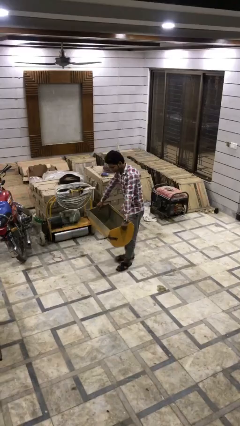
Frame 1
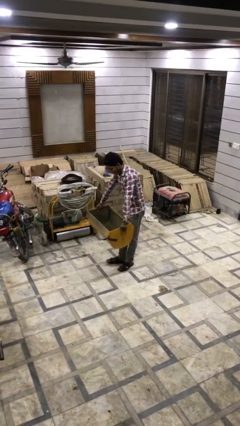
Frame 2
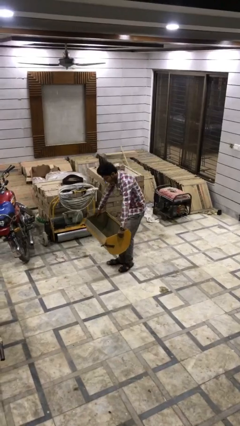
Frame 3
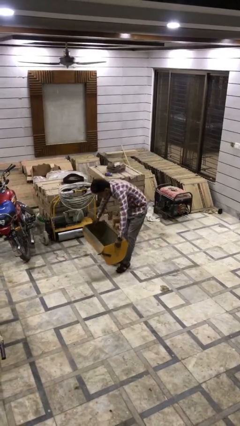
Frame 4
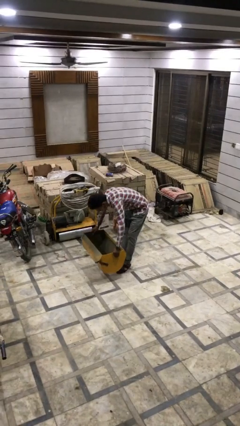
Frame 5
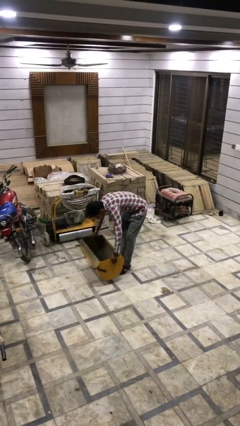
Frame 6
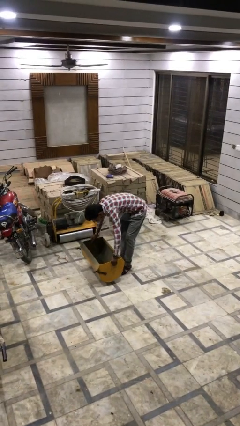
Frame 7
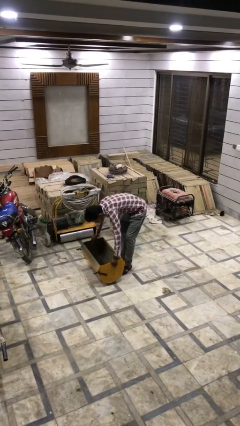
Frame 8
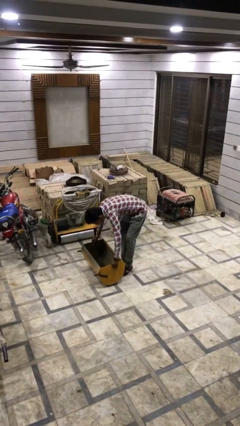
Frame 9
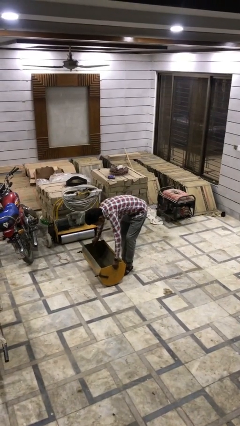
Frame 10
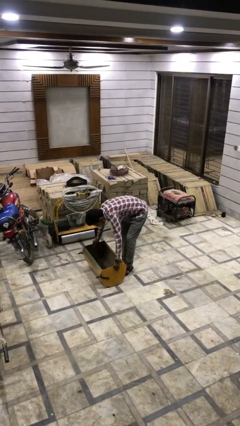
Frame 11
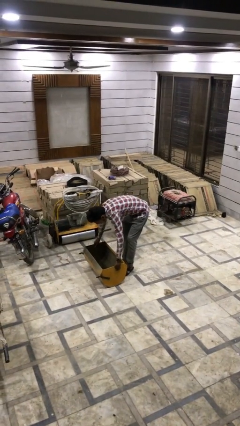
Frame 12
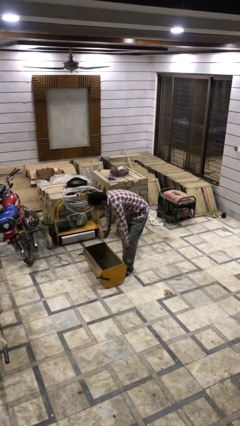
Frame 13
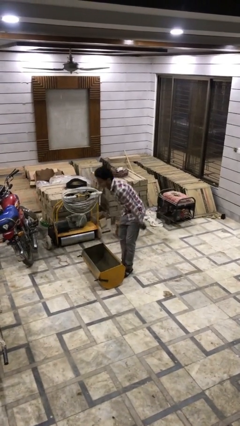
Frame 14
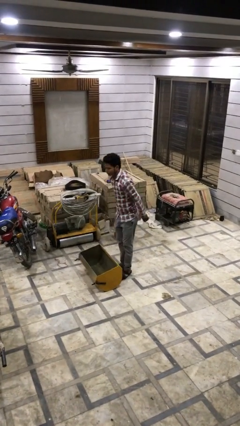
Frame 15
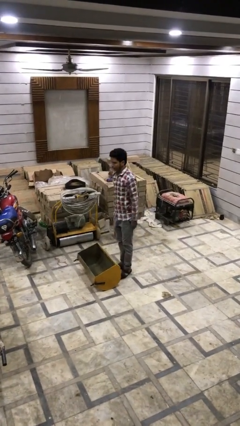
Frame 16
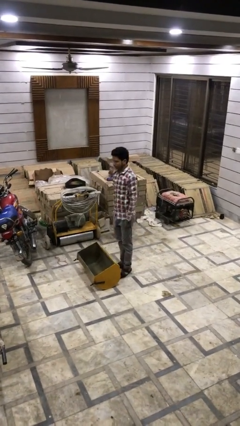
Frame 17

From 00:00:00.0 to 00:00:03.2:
person puts down object on floor

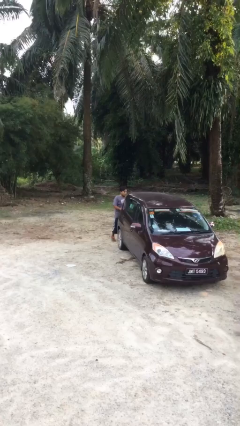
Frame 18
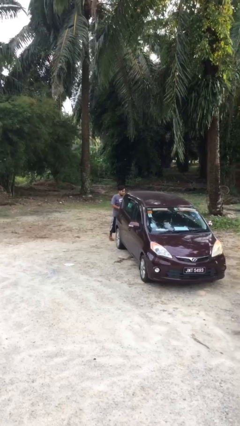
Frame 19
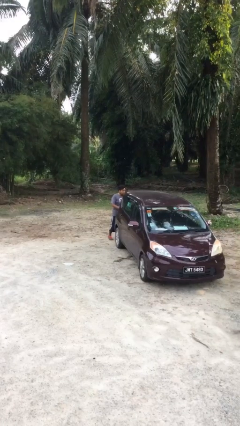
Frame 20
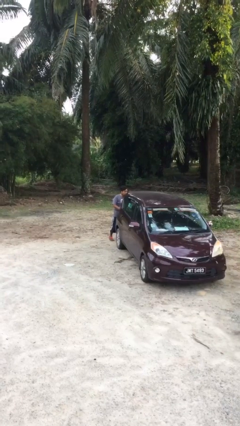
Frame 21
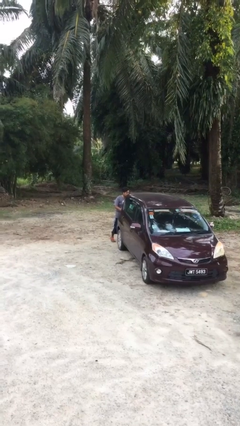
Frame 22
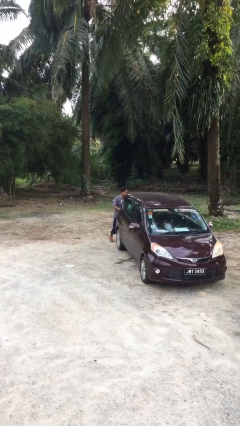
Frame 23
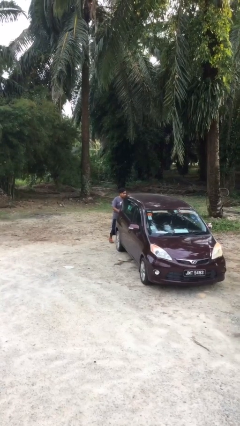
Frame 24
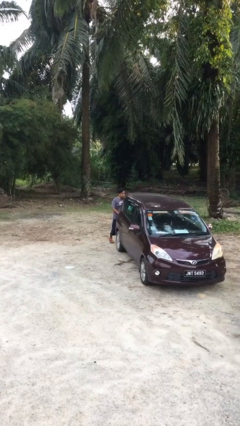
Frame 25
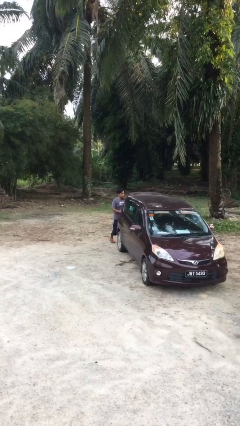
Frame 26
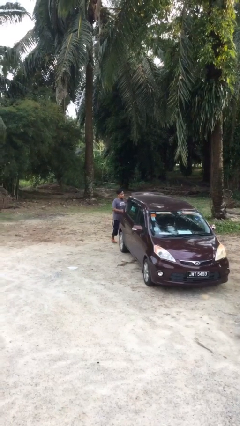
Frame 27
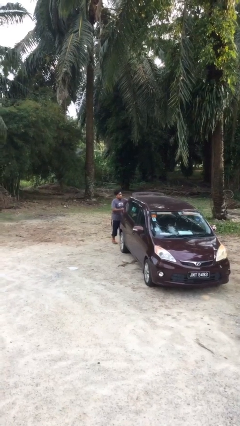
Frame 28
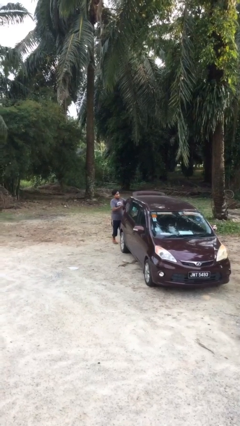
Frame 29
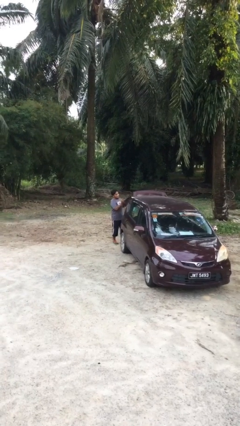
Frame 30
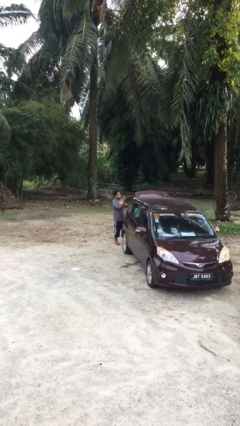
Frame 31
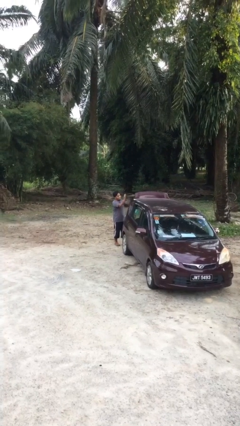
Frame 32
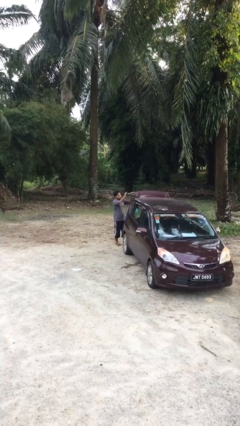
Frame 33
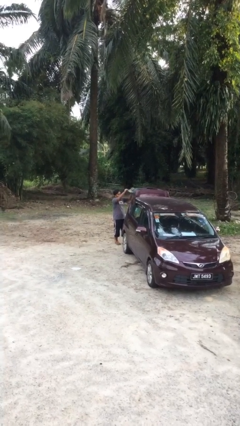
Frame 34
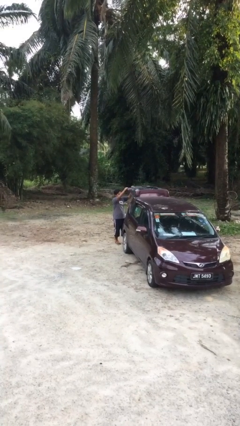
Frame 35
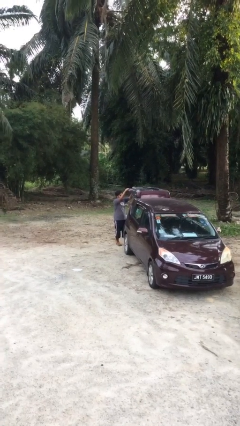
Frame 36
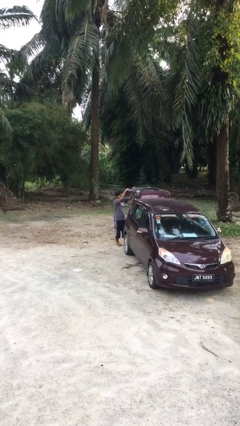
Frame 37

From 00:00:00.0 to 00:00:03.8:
person opens car trunk

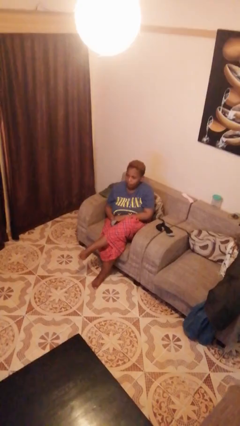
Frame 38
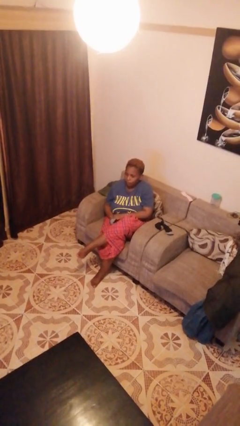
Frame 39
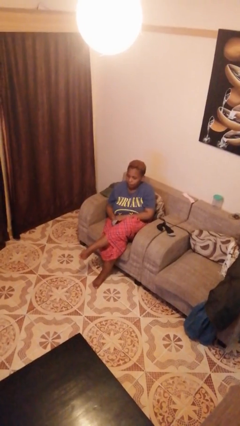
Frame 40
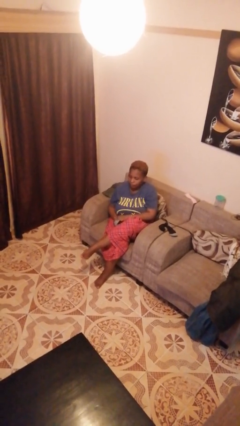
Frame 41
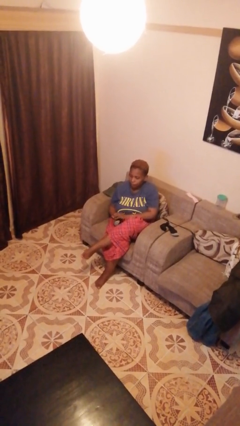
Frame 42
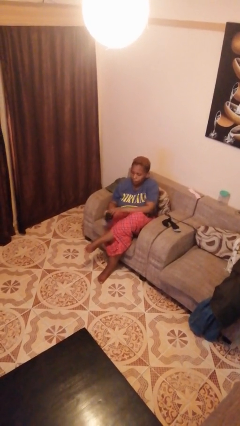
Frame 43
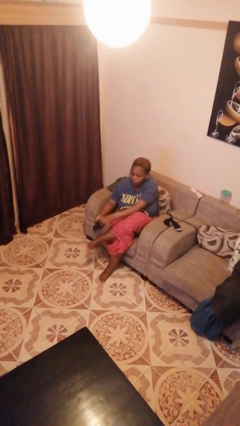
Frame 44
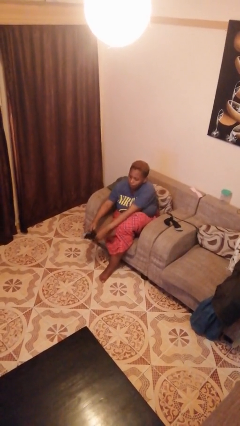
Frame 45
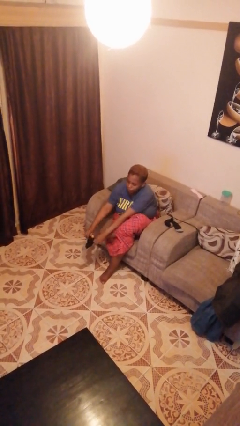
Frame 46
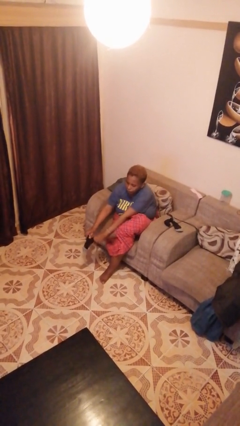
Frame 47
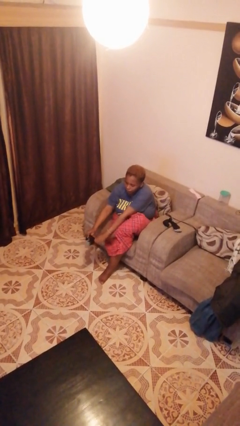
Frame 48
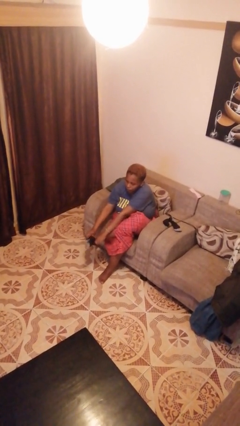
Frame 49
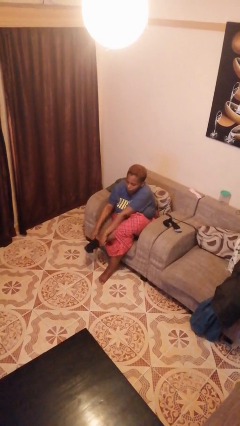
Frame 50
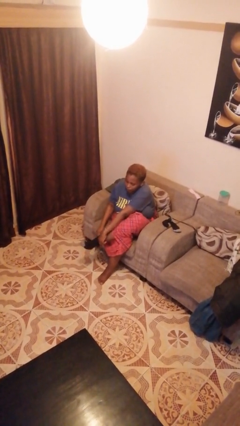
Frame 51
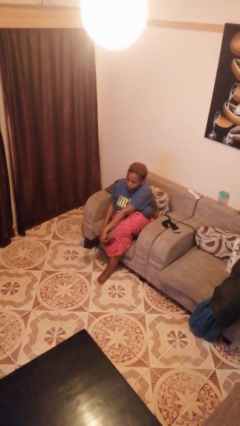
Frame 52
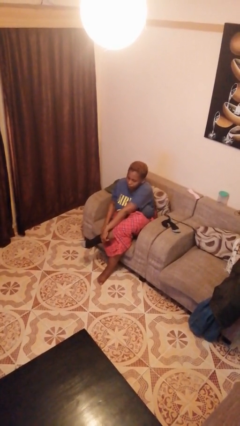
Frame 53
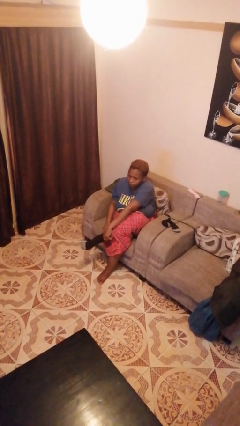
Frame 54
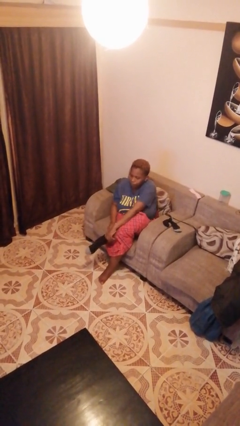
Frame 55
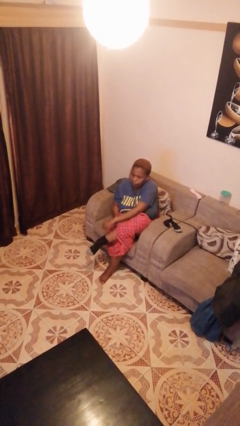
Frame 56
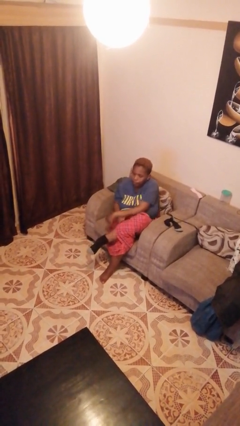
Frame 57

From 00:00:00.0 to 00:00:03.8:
person puts on socks

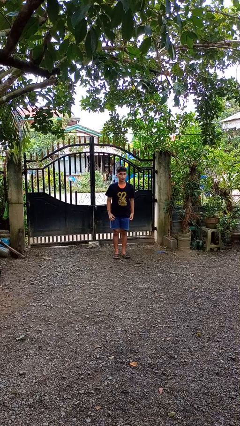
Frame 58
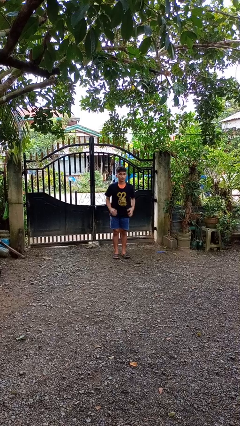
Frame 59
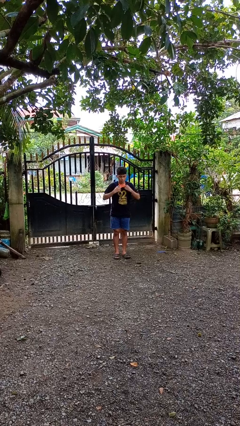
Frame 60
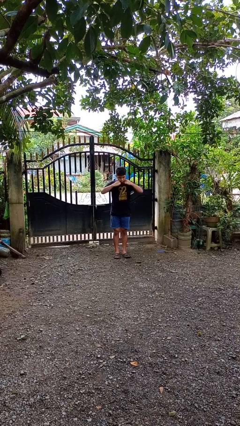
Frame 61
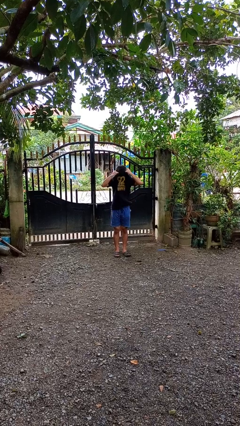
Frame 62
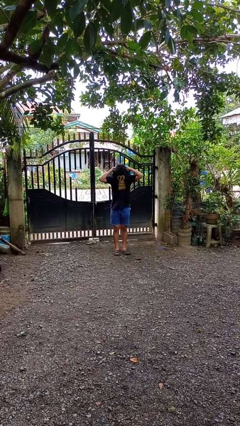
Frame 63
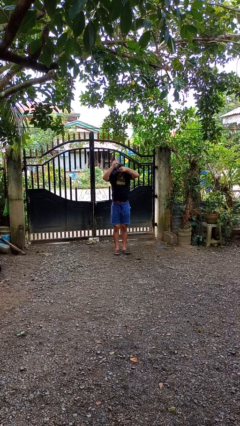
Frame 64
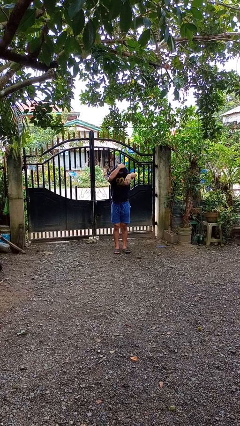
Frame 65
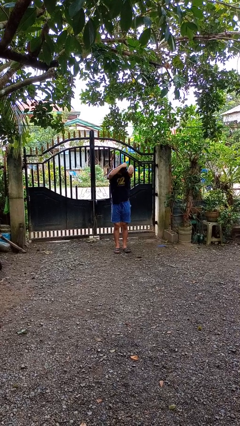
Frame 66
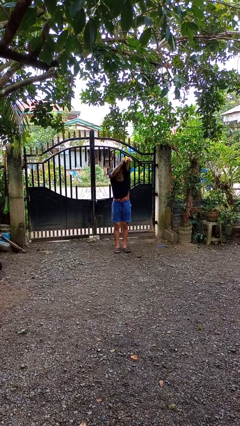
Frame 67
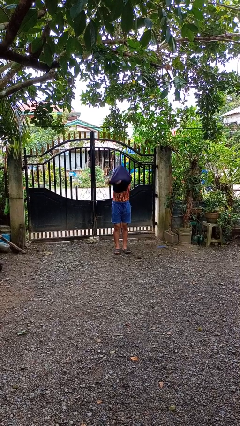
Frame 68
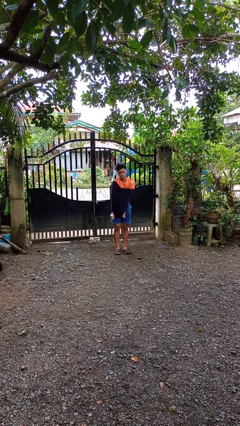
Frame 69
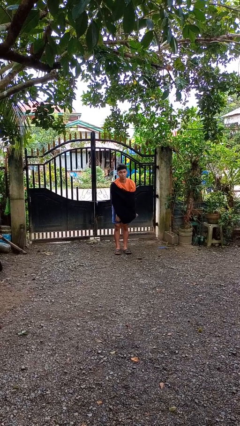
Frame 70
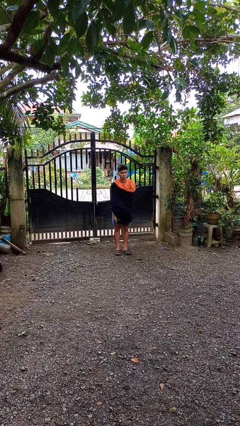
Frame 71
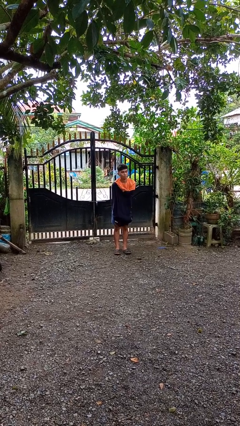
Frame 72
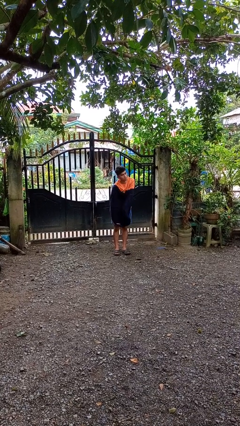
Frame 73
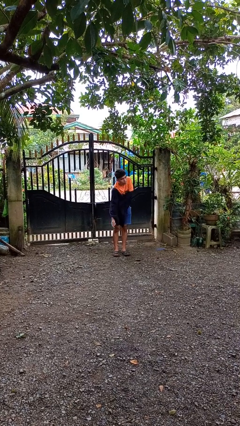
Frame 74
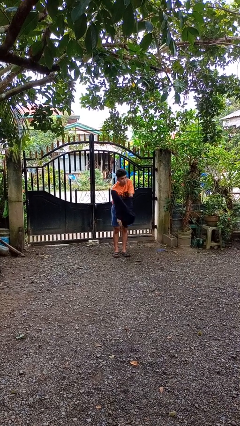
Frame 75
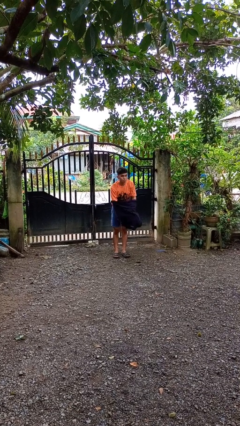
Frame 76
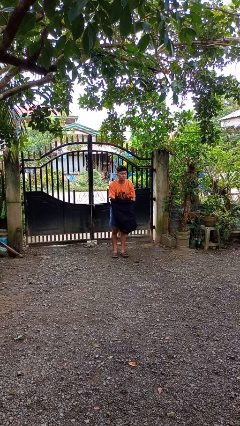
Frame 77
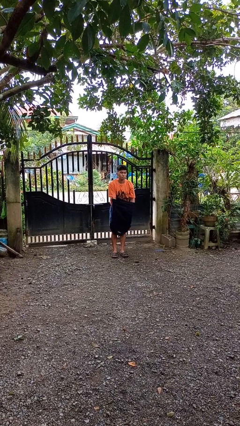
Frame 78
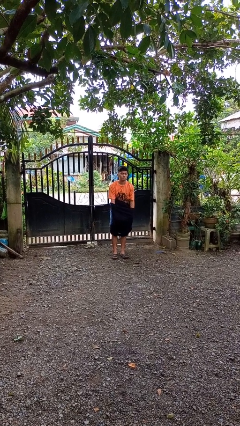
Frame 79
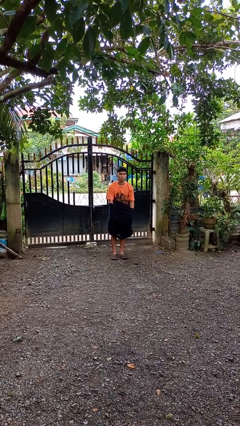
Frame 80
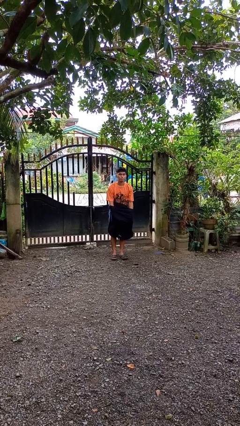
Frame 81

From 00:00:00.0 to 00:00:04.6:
person takes off shirt

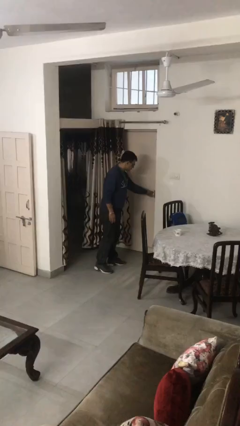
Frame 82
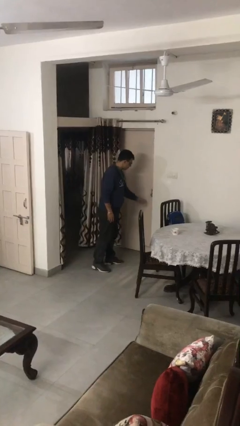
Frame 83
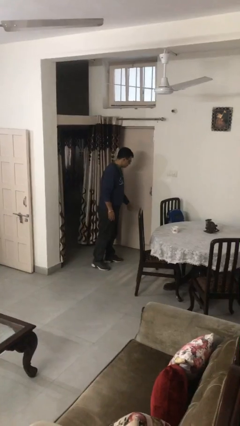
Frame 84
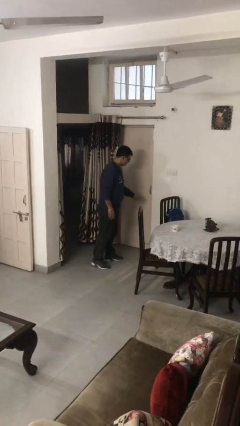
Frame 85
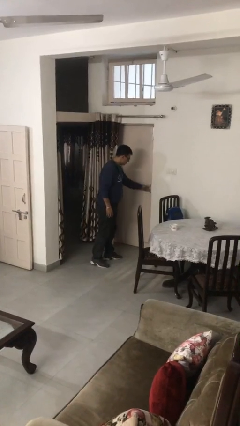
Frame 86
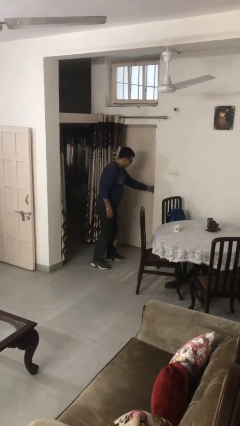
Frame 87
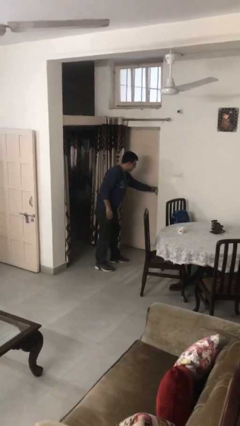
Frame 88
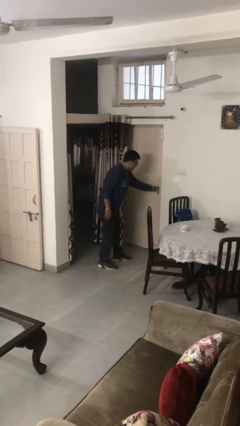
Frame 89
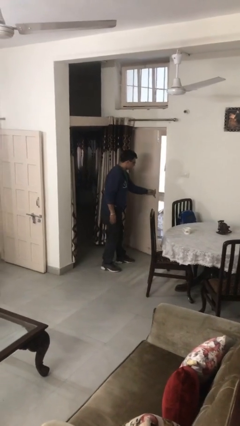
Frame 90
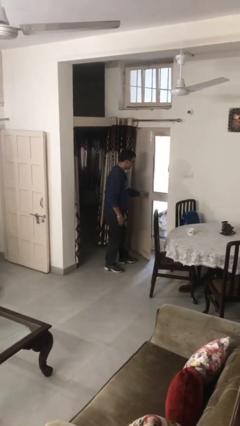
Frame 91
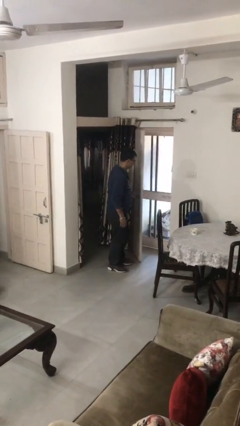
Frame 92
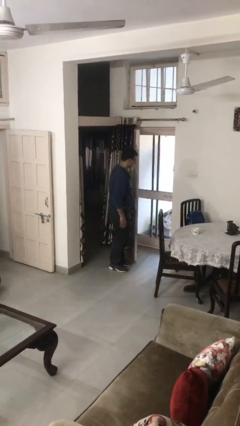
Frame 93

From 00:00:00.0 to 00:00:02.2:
person opens facility door
